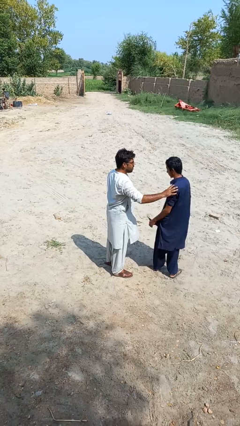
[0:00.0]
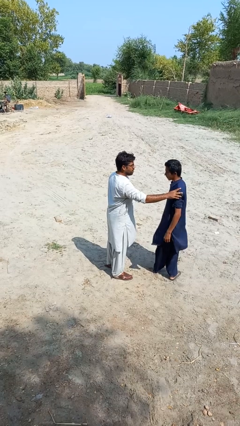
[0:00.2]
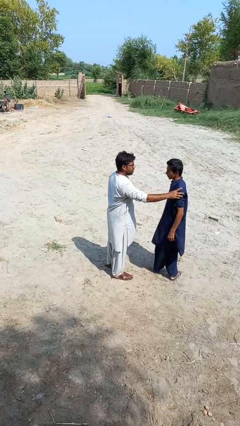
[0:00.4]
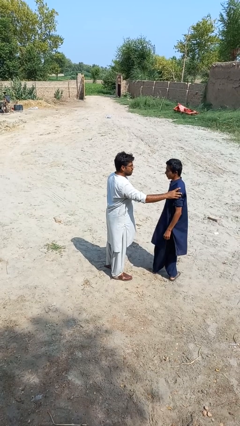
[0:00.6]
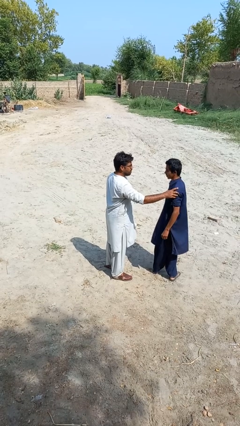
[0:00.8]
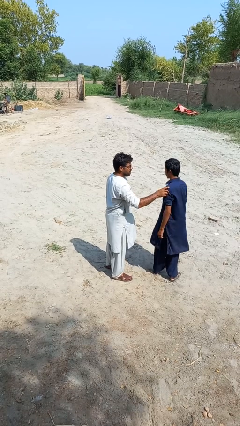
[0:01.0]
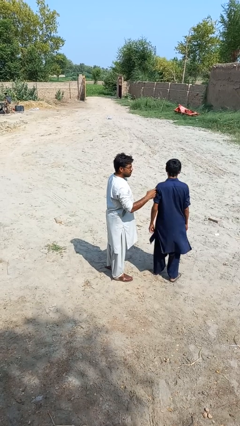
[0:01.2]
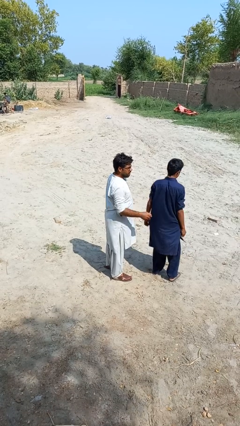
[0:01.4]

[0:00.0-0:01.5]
person spins person around

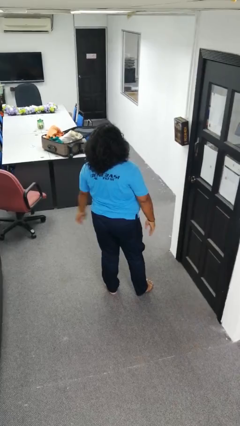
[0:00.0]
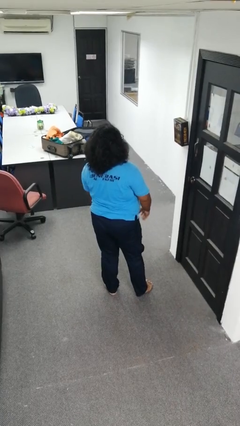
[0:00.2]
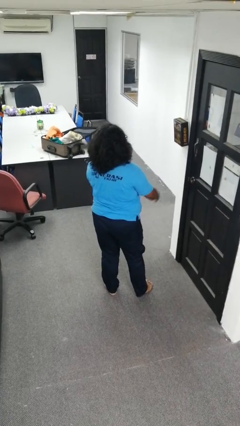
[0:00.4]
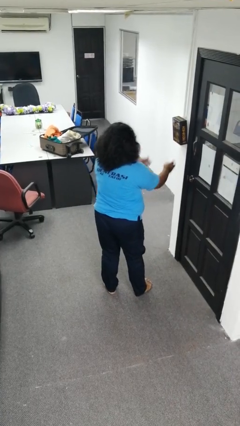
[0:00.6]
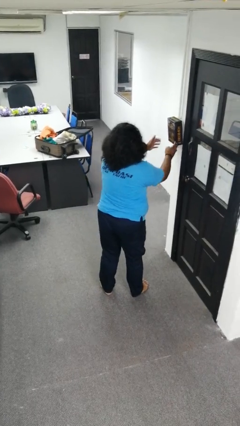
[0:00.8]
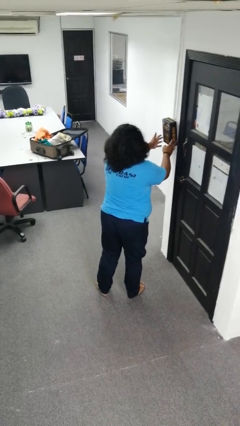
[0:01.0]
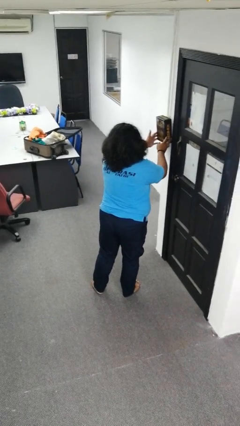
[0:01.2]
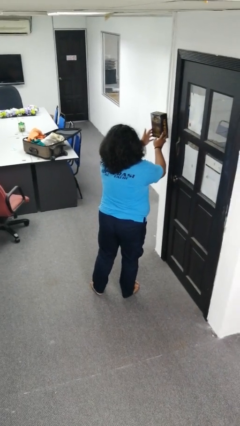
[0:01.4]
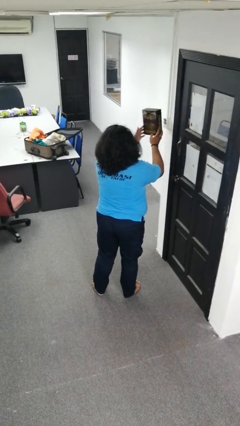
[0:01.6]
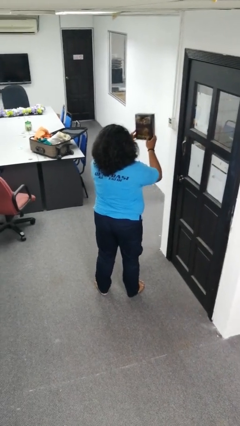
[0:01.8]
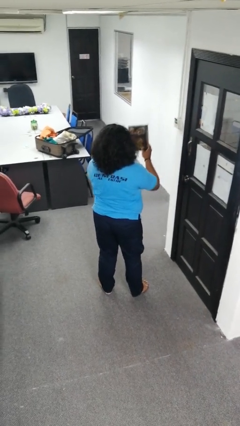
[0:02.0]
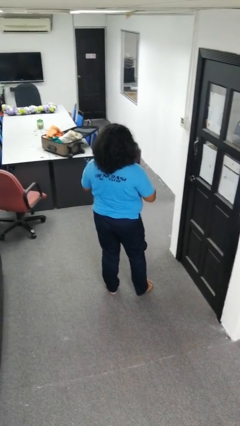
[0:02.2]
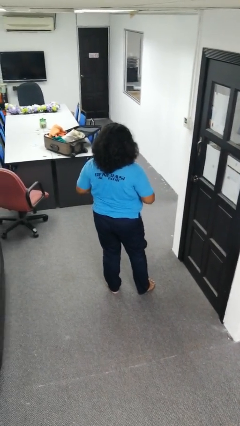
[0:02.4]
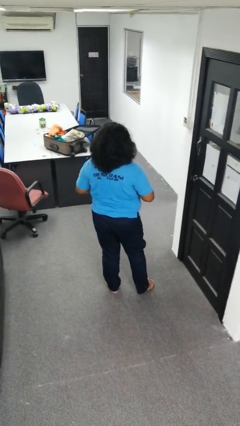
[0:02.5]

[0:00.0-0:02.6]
person takes down picture frame

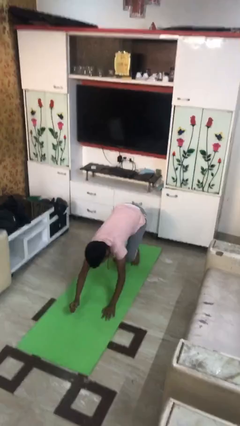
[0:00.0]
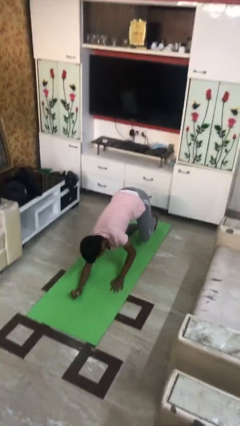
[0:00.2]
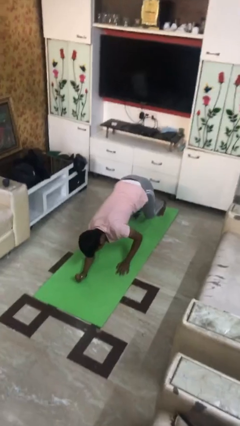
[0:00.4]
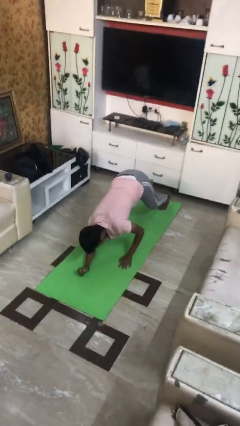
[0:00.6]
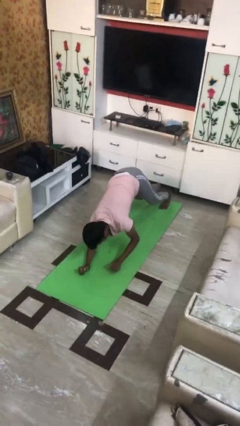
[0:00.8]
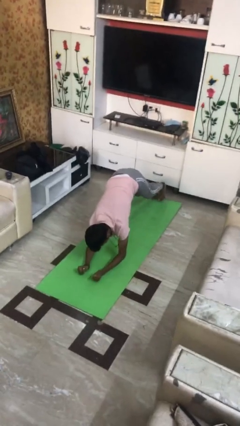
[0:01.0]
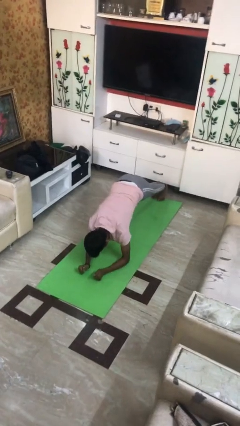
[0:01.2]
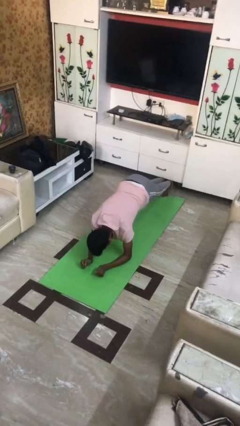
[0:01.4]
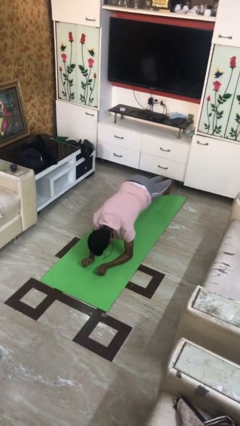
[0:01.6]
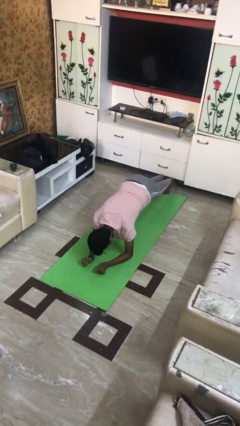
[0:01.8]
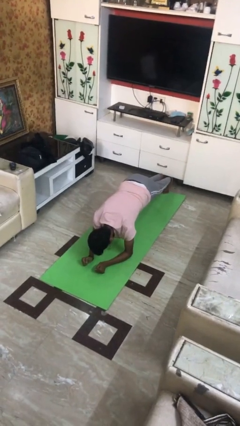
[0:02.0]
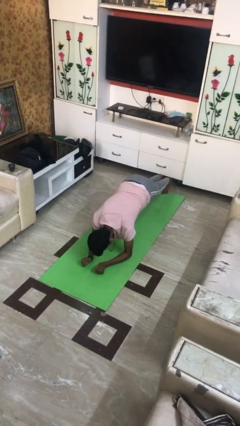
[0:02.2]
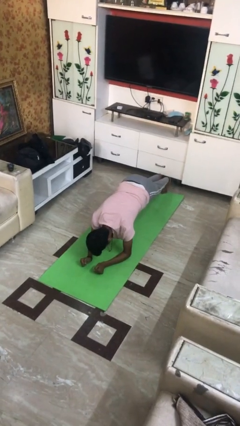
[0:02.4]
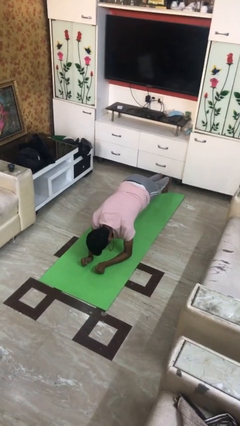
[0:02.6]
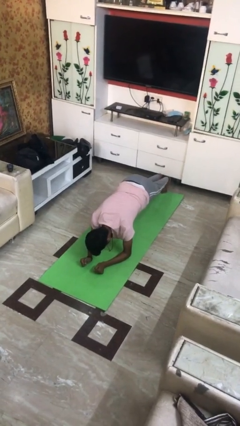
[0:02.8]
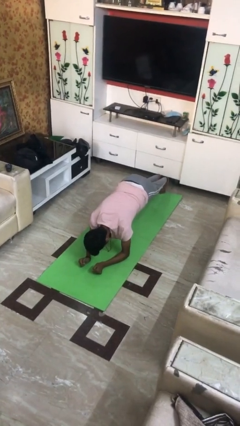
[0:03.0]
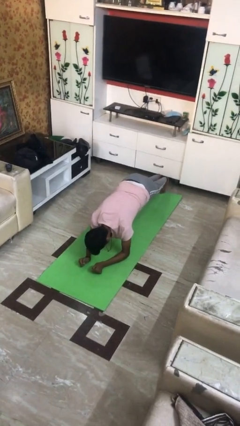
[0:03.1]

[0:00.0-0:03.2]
person exercises with plank

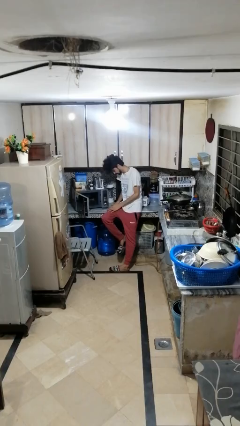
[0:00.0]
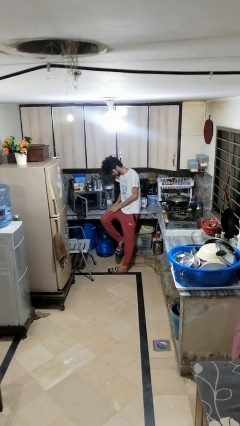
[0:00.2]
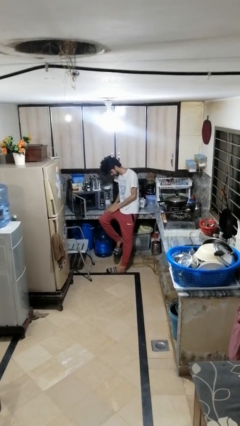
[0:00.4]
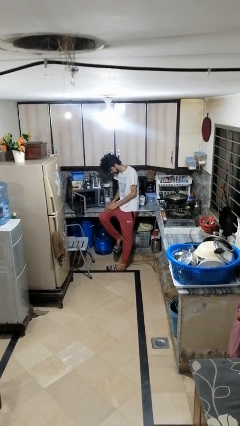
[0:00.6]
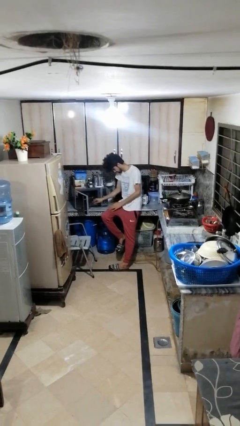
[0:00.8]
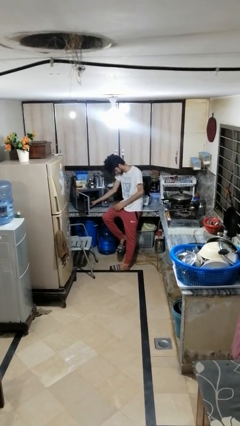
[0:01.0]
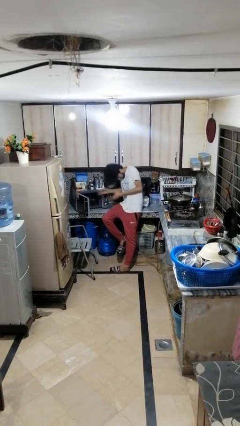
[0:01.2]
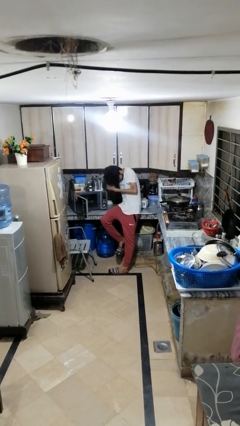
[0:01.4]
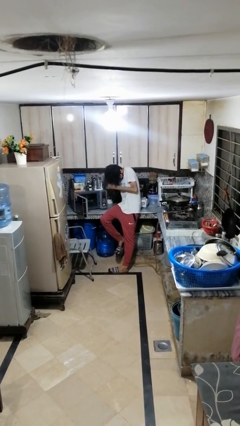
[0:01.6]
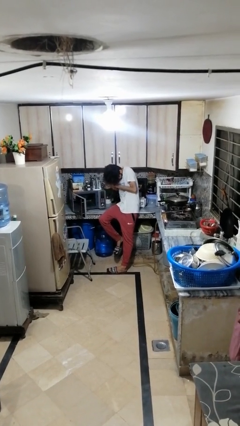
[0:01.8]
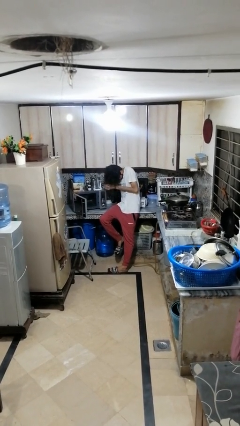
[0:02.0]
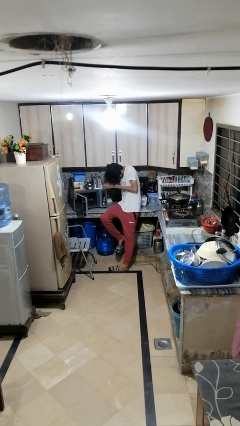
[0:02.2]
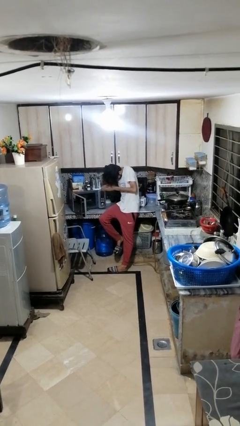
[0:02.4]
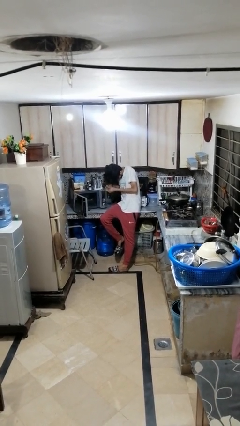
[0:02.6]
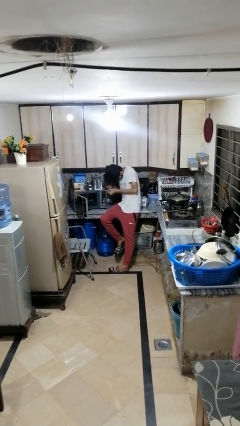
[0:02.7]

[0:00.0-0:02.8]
person burns hand

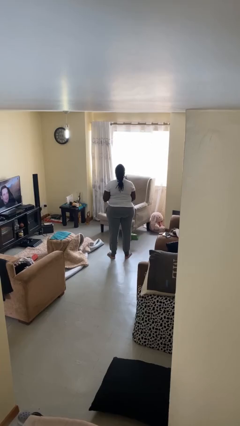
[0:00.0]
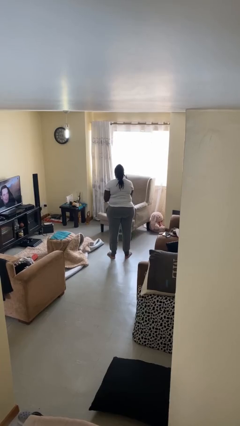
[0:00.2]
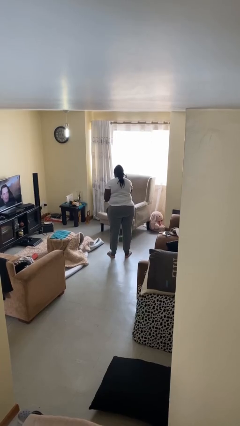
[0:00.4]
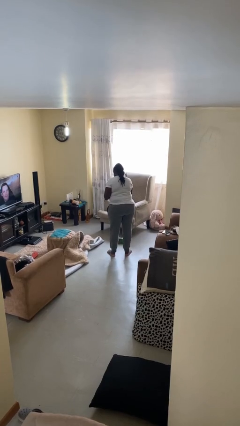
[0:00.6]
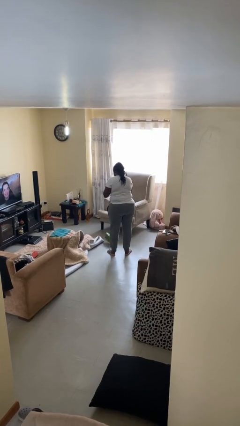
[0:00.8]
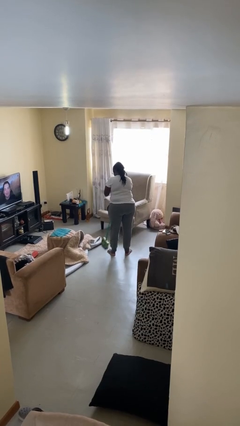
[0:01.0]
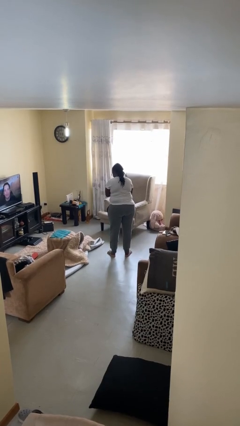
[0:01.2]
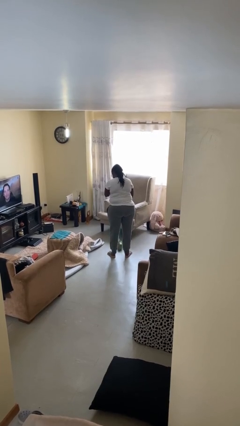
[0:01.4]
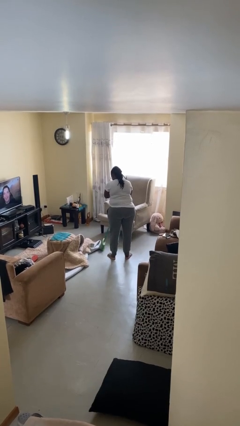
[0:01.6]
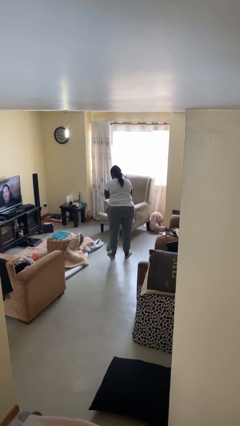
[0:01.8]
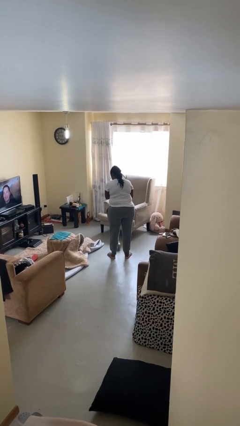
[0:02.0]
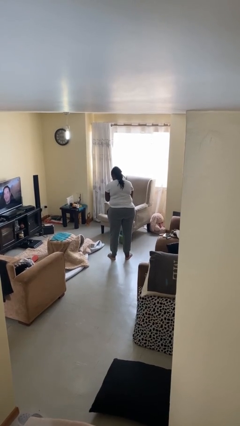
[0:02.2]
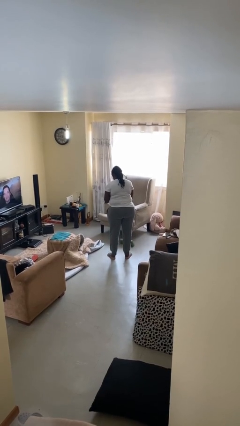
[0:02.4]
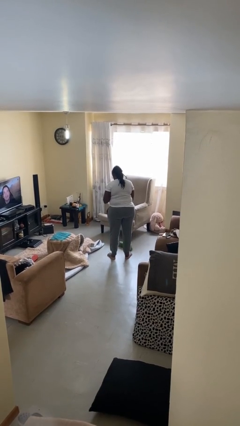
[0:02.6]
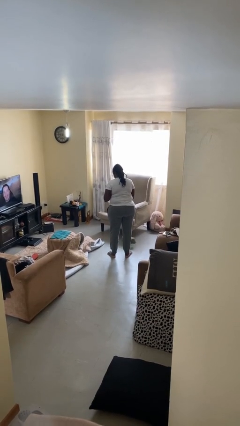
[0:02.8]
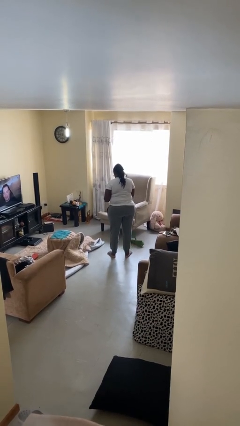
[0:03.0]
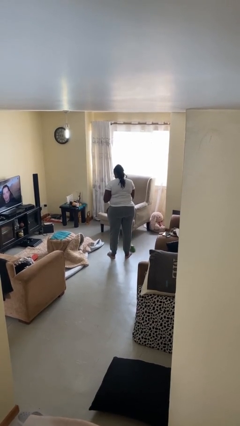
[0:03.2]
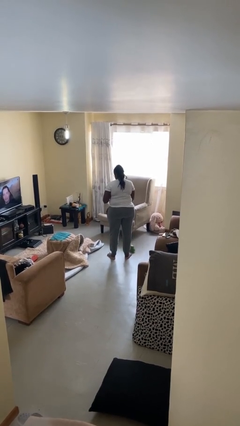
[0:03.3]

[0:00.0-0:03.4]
person sweeps floor

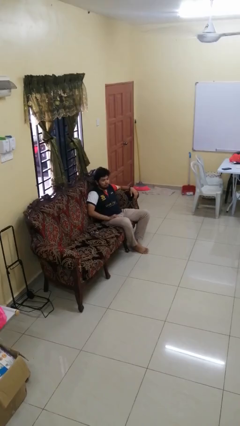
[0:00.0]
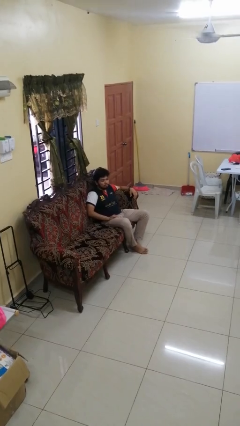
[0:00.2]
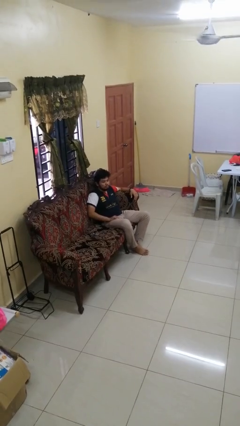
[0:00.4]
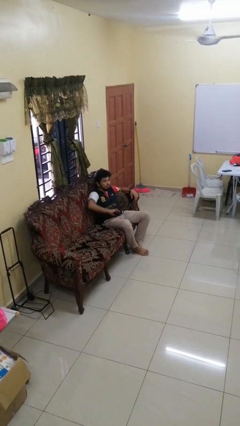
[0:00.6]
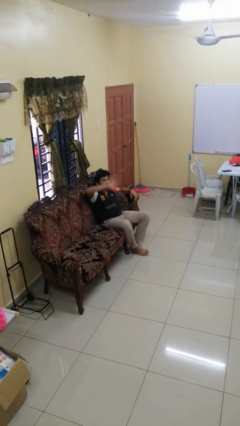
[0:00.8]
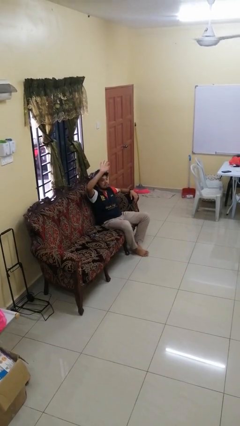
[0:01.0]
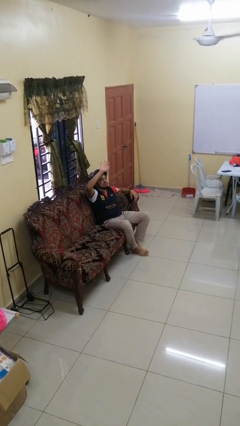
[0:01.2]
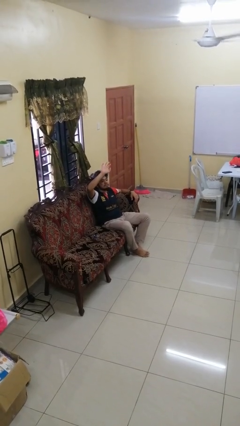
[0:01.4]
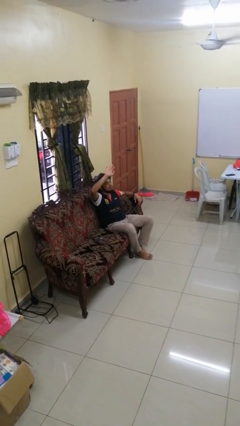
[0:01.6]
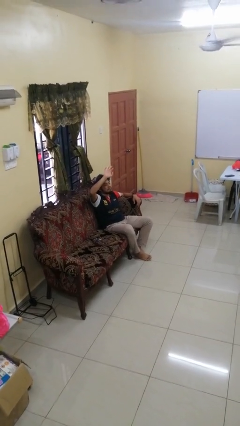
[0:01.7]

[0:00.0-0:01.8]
person gestures swipe up

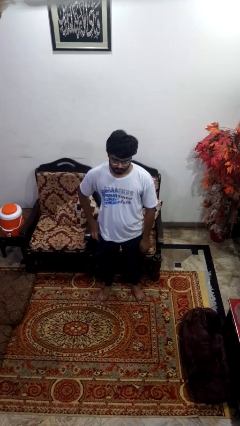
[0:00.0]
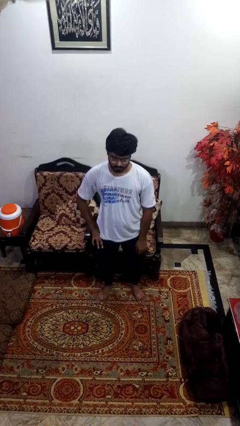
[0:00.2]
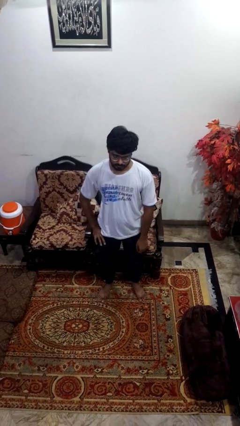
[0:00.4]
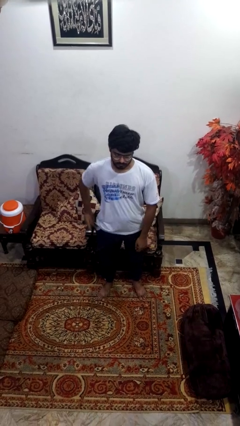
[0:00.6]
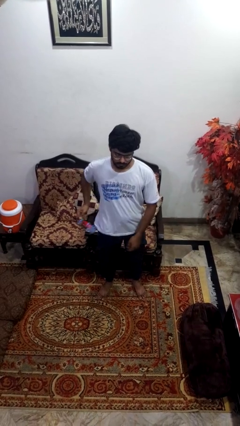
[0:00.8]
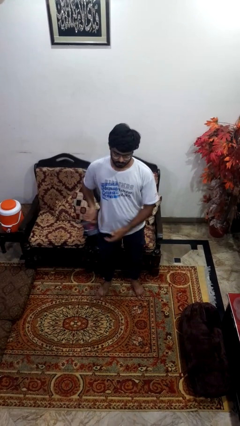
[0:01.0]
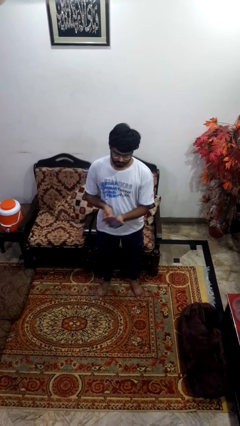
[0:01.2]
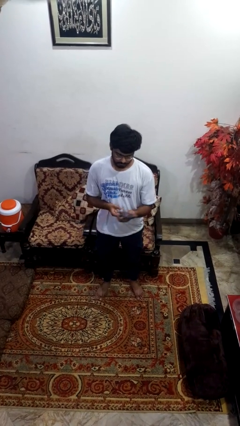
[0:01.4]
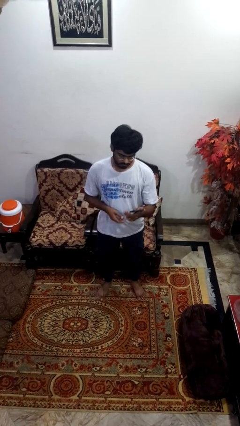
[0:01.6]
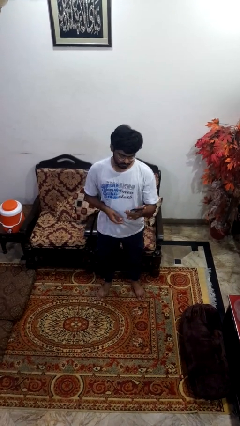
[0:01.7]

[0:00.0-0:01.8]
person takes phone from pocket

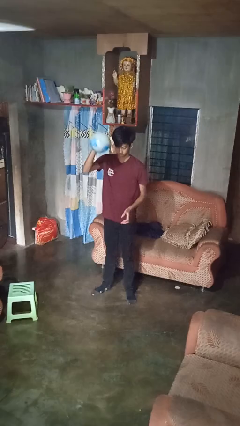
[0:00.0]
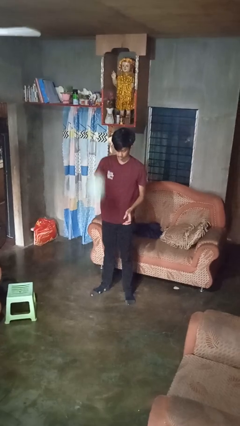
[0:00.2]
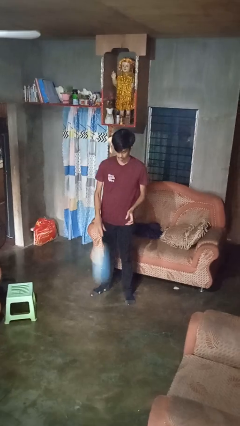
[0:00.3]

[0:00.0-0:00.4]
person bounces ball on floor
